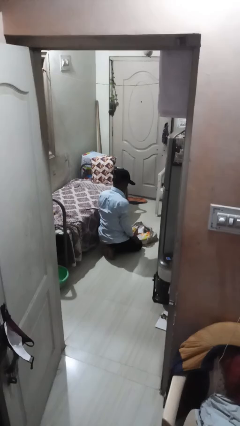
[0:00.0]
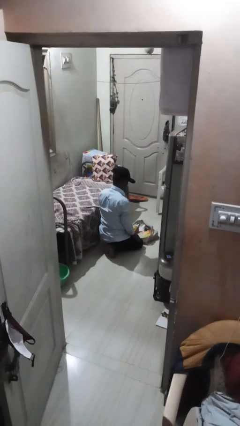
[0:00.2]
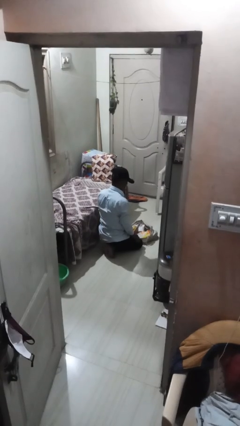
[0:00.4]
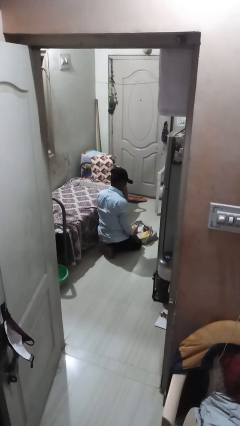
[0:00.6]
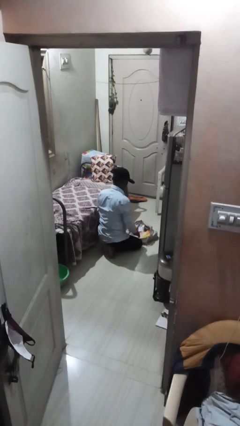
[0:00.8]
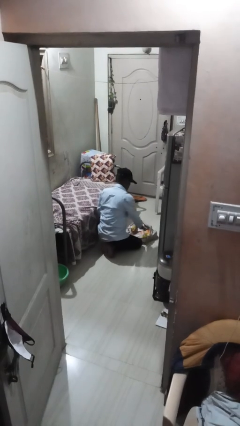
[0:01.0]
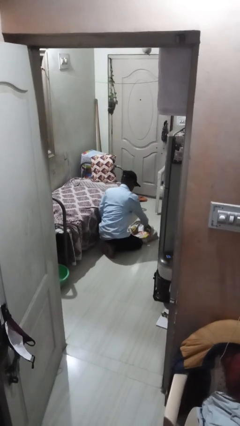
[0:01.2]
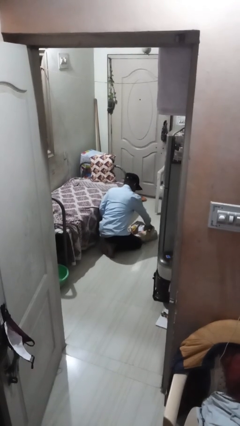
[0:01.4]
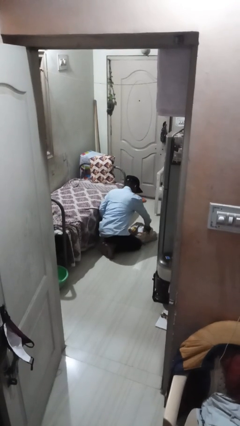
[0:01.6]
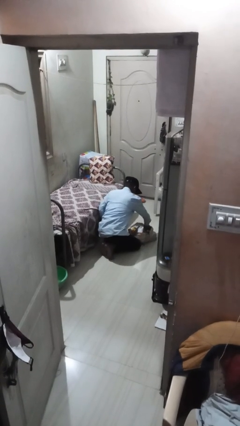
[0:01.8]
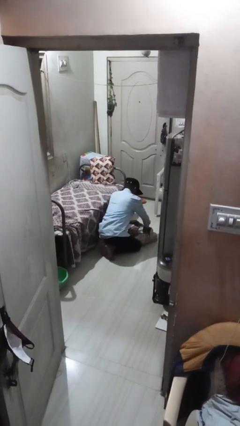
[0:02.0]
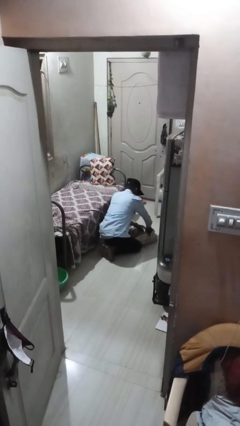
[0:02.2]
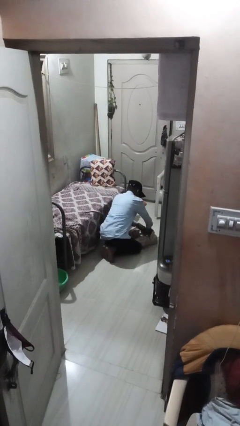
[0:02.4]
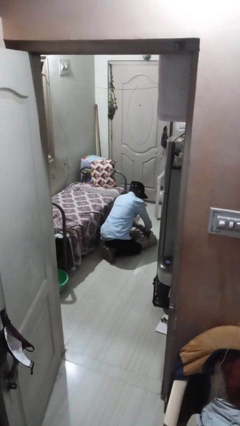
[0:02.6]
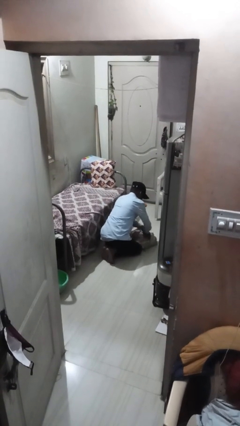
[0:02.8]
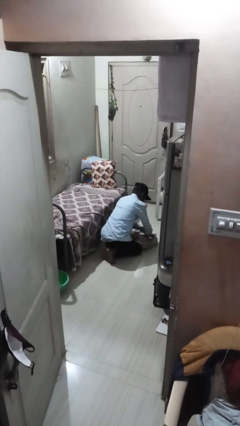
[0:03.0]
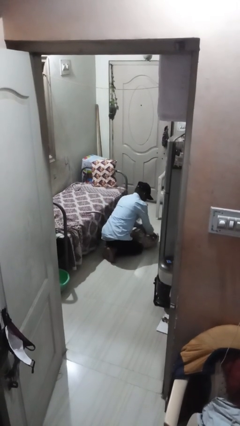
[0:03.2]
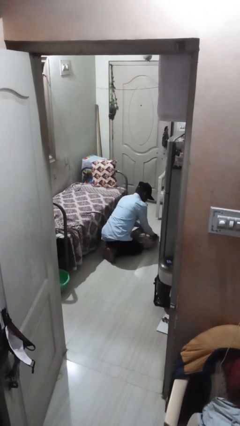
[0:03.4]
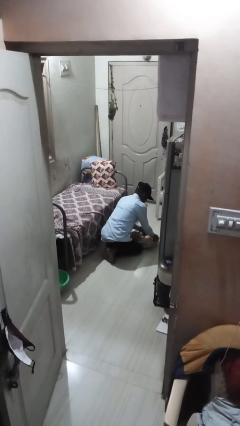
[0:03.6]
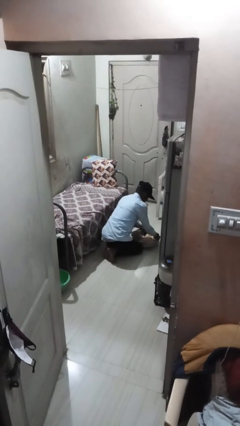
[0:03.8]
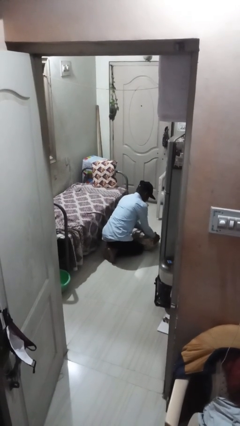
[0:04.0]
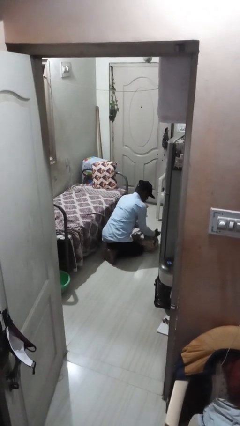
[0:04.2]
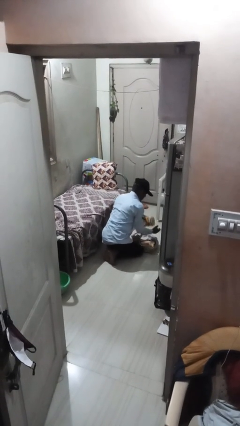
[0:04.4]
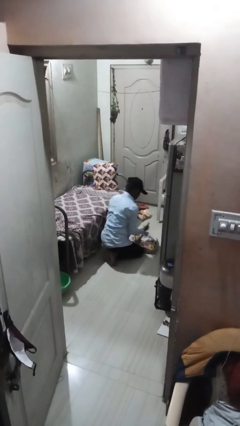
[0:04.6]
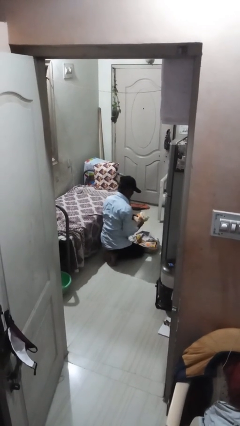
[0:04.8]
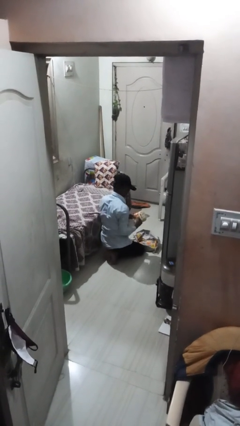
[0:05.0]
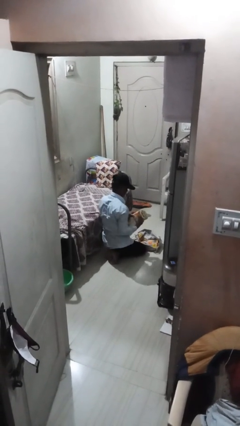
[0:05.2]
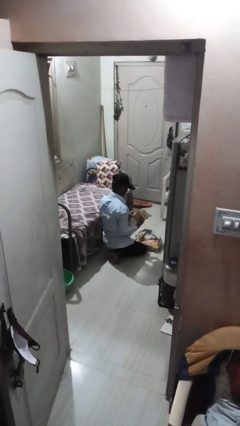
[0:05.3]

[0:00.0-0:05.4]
person takes object from bag

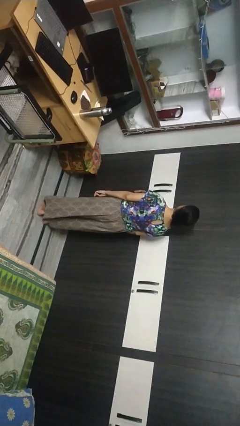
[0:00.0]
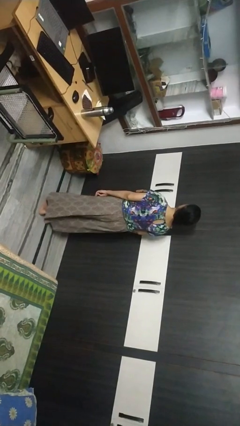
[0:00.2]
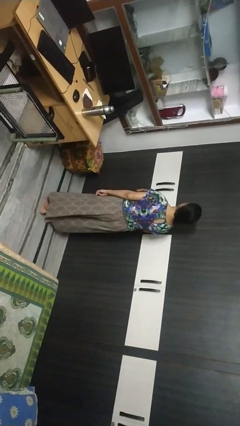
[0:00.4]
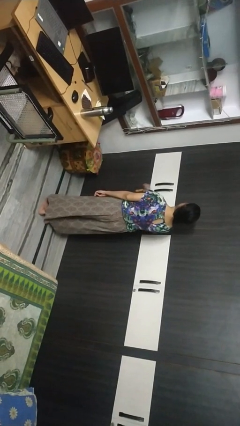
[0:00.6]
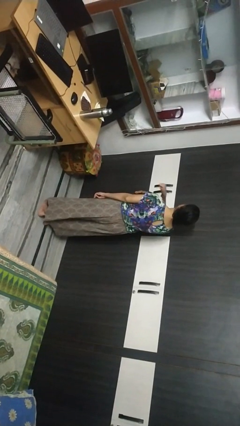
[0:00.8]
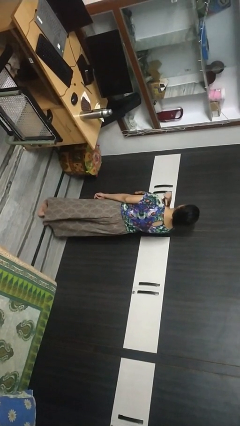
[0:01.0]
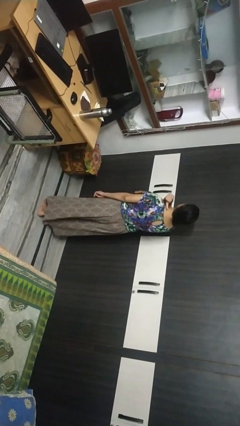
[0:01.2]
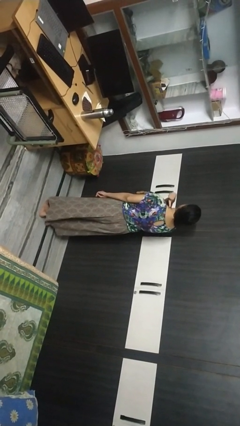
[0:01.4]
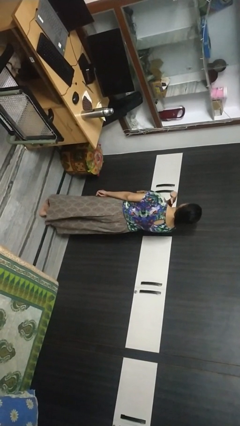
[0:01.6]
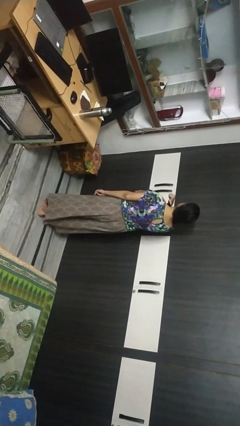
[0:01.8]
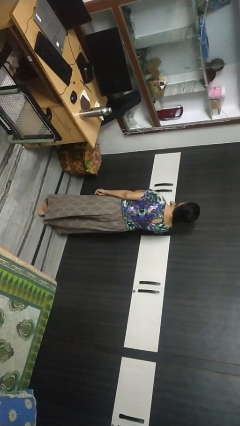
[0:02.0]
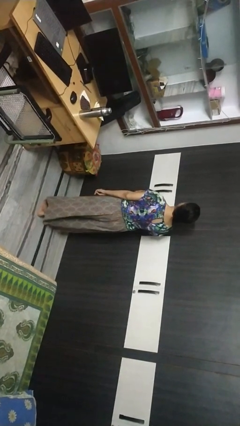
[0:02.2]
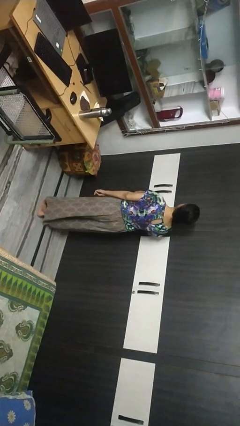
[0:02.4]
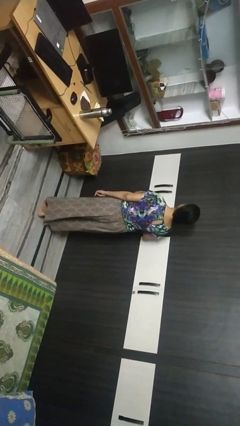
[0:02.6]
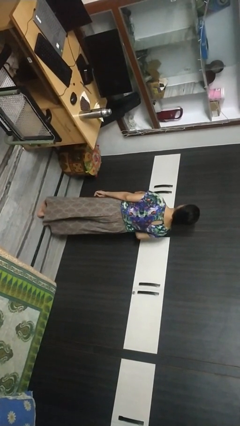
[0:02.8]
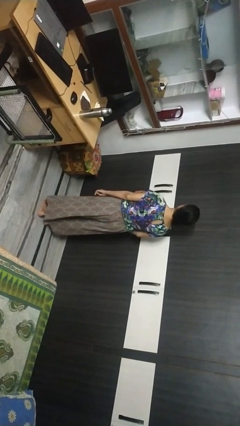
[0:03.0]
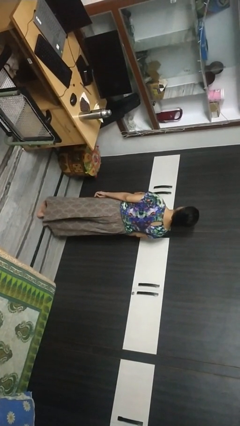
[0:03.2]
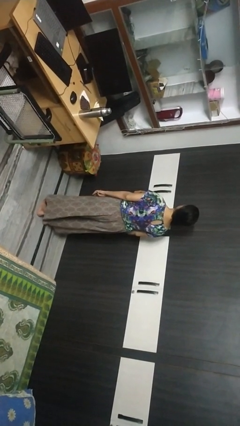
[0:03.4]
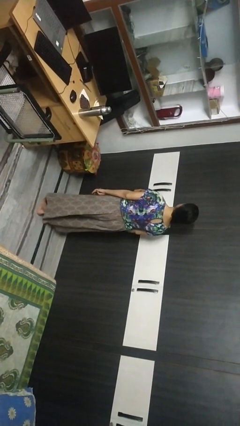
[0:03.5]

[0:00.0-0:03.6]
person gestures cut

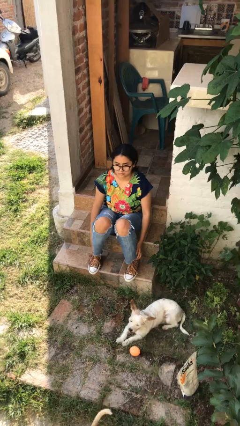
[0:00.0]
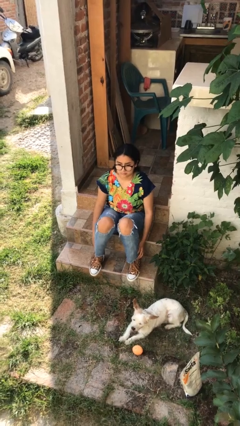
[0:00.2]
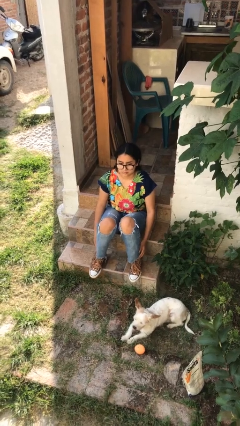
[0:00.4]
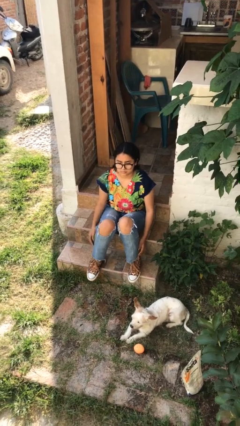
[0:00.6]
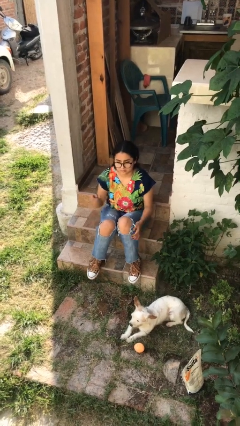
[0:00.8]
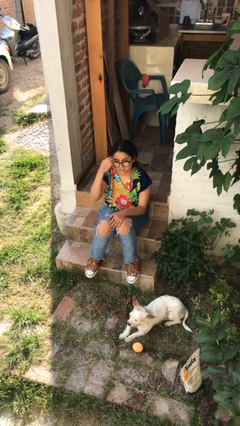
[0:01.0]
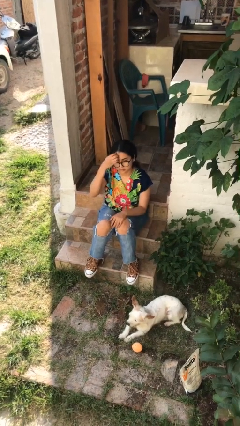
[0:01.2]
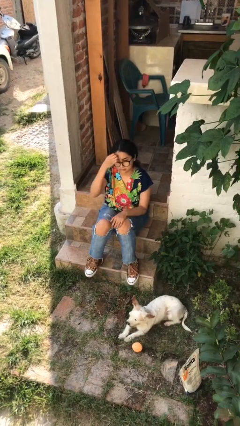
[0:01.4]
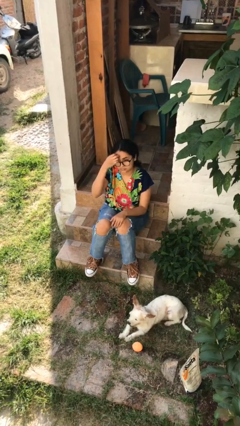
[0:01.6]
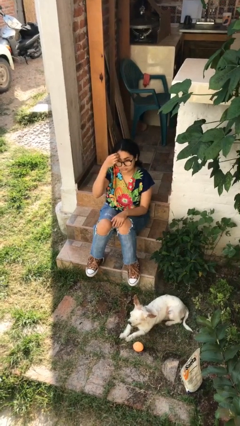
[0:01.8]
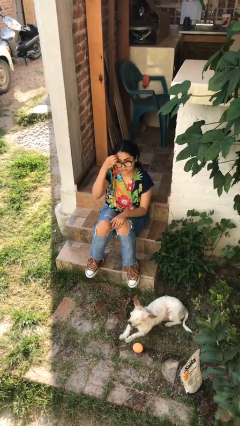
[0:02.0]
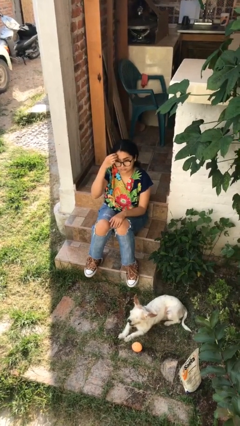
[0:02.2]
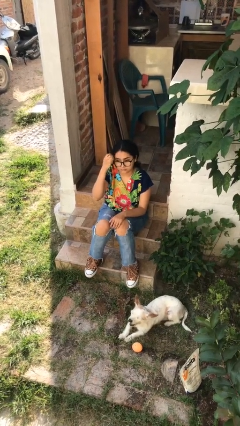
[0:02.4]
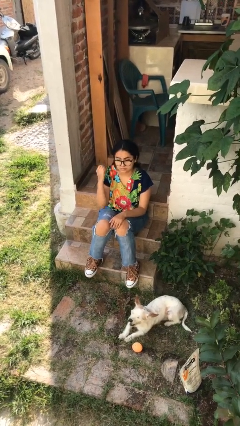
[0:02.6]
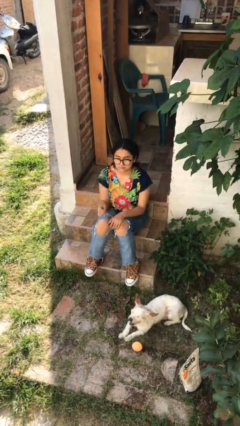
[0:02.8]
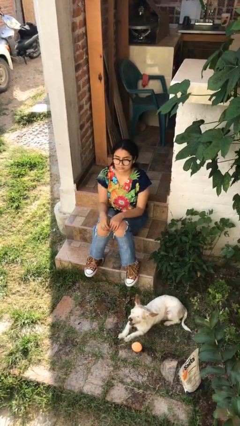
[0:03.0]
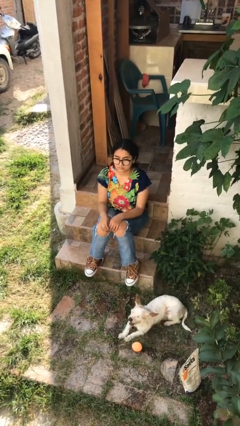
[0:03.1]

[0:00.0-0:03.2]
person scratches face

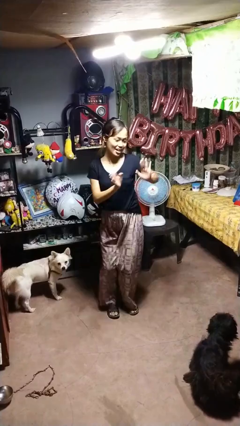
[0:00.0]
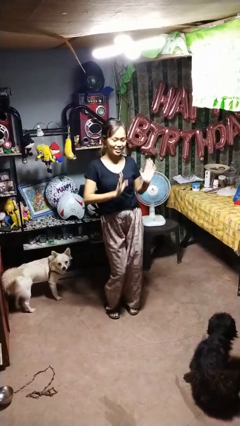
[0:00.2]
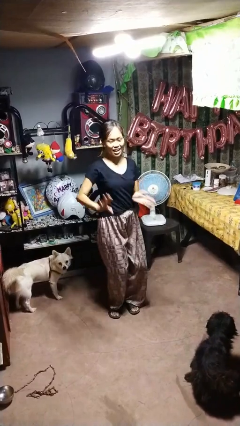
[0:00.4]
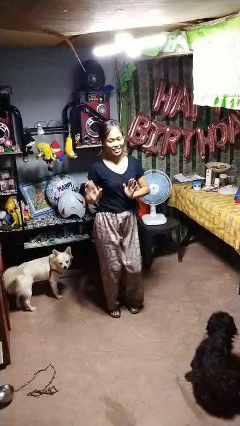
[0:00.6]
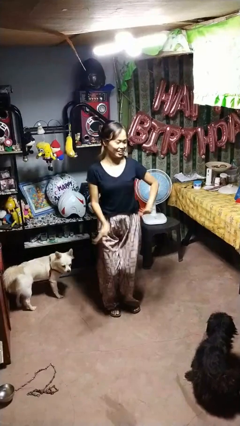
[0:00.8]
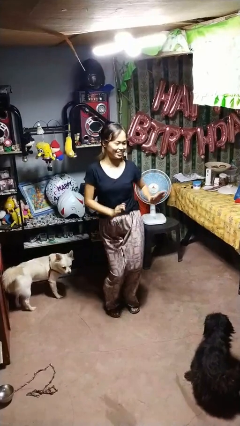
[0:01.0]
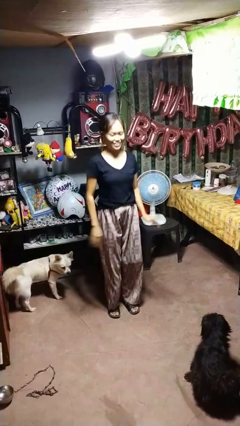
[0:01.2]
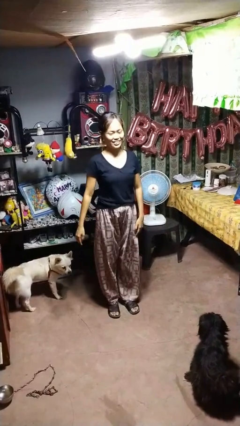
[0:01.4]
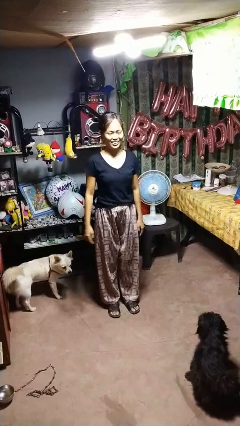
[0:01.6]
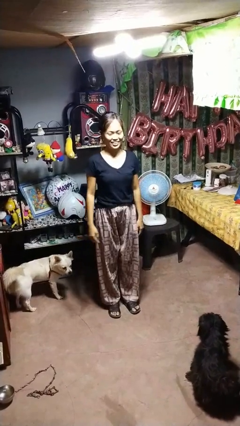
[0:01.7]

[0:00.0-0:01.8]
person dances in place

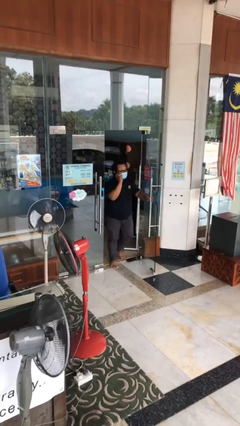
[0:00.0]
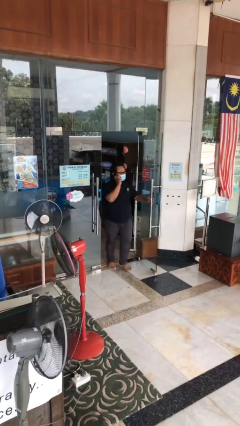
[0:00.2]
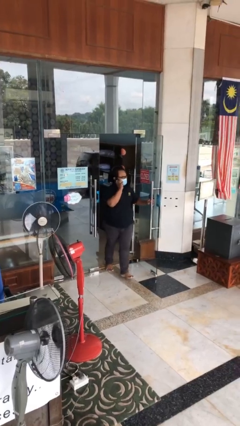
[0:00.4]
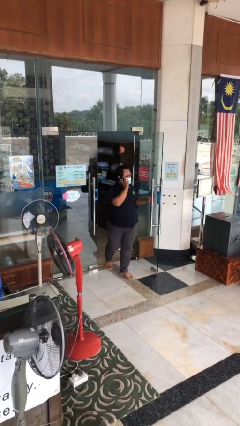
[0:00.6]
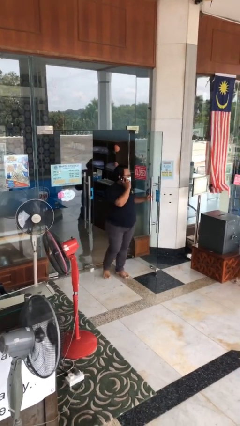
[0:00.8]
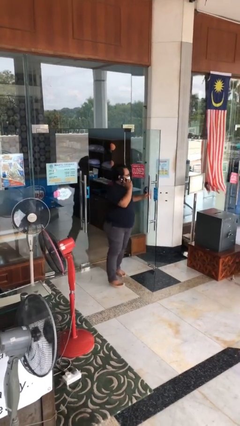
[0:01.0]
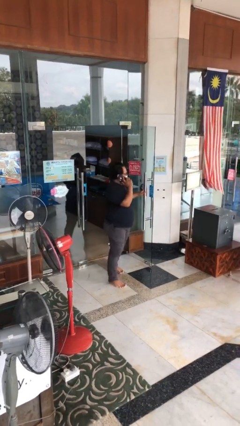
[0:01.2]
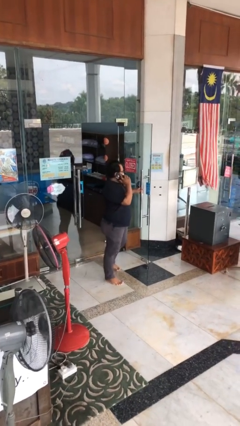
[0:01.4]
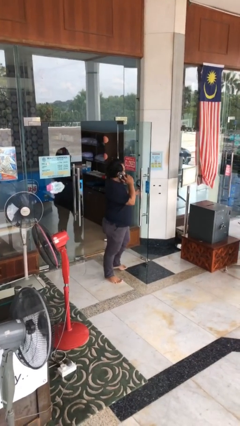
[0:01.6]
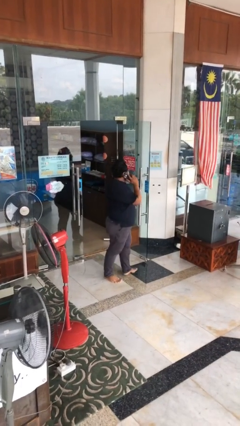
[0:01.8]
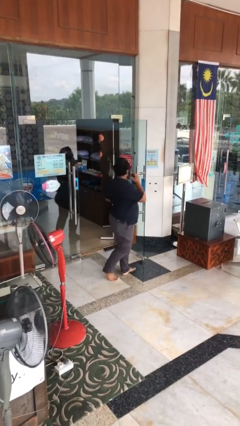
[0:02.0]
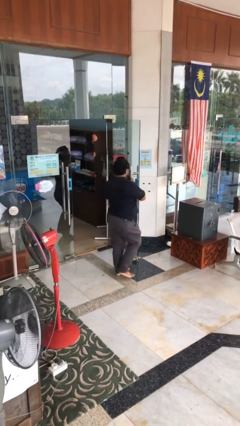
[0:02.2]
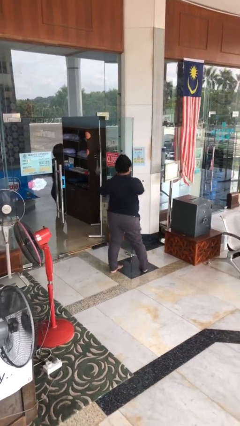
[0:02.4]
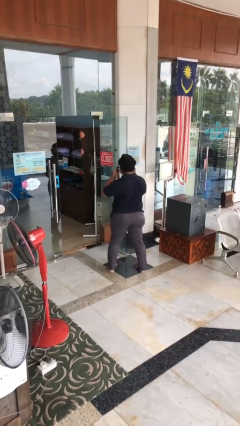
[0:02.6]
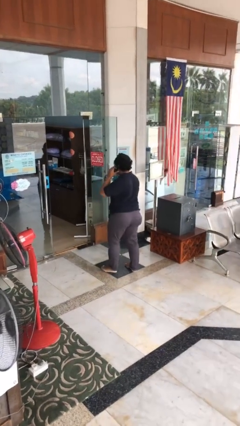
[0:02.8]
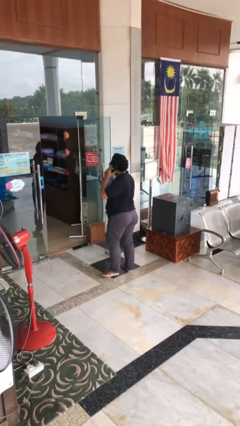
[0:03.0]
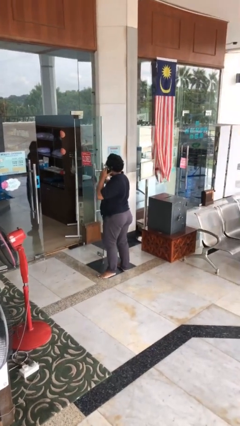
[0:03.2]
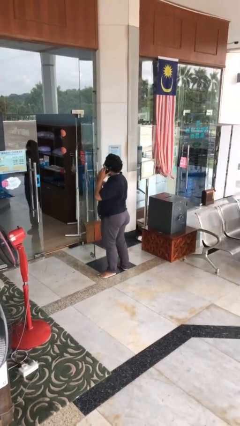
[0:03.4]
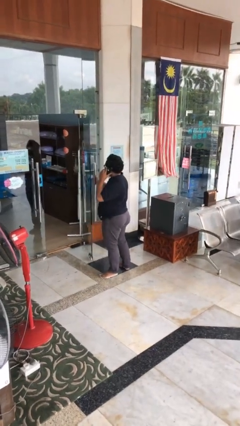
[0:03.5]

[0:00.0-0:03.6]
person enters scene through structure
